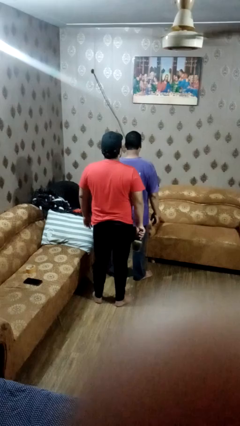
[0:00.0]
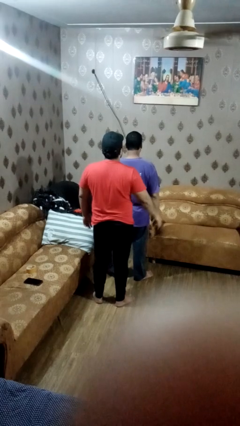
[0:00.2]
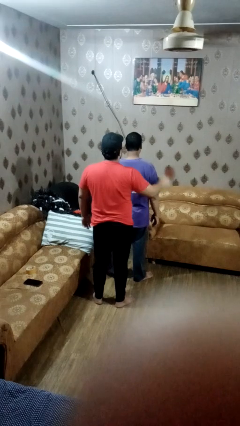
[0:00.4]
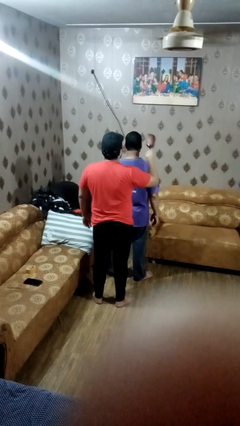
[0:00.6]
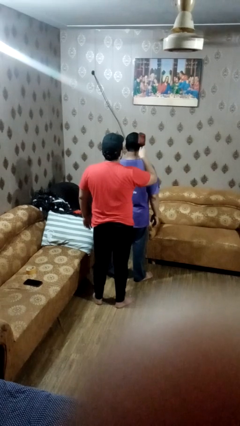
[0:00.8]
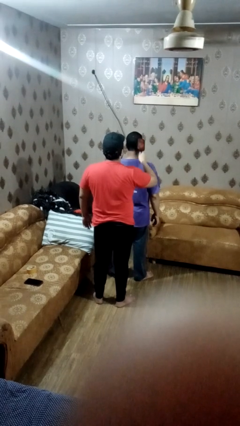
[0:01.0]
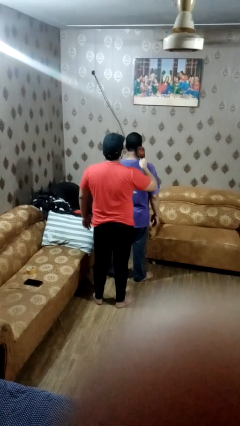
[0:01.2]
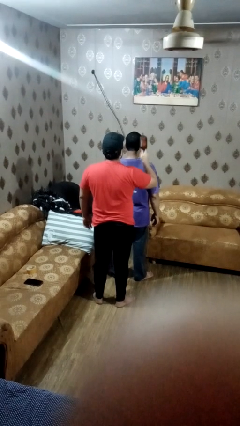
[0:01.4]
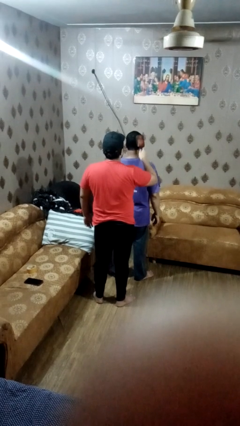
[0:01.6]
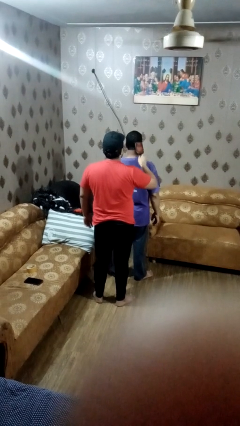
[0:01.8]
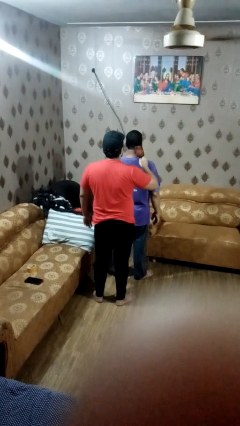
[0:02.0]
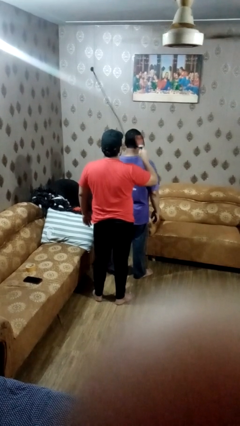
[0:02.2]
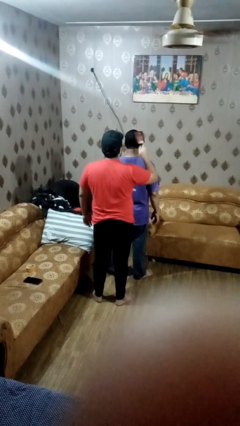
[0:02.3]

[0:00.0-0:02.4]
person brushes hair of person

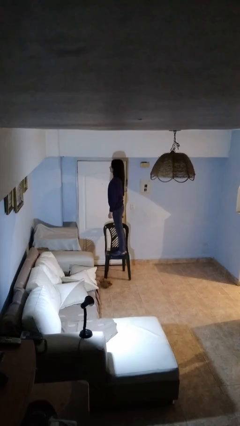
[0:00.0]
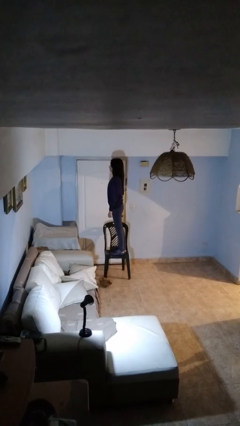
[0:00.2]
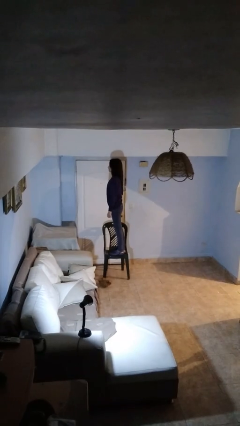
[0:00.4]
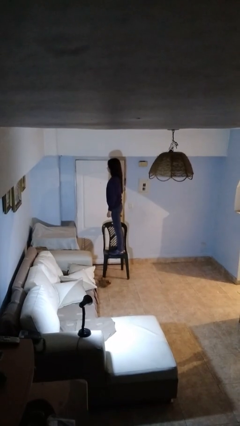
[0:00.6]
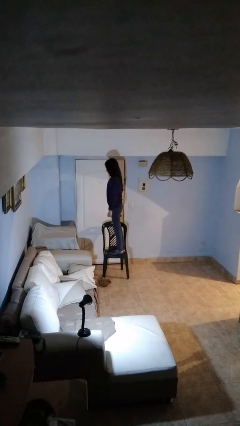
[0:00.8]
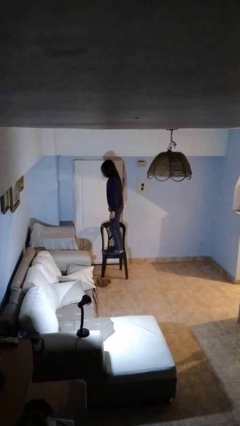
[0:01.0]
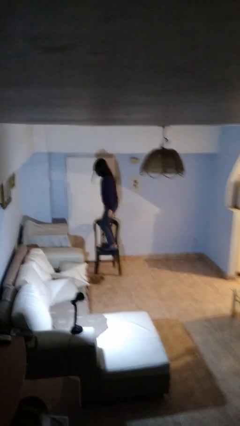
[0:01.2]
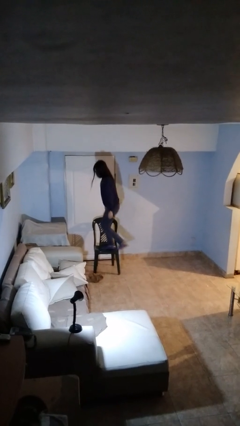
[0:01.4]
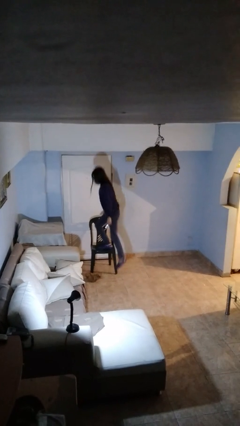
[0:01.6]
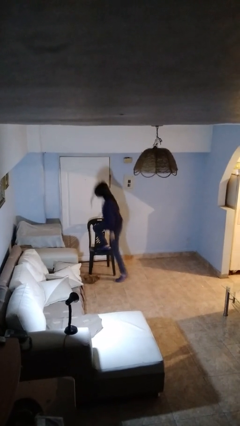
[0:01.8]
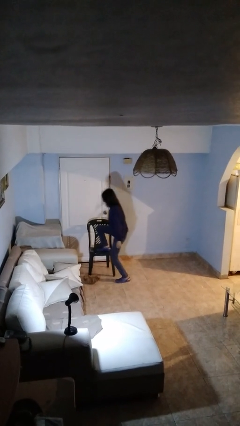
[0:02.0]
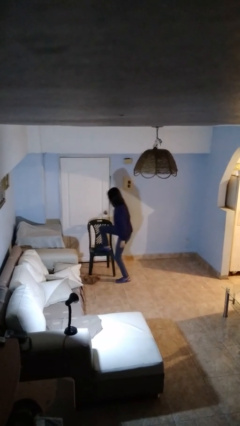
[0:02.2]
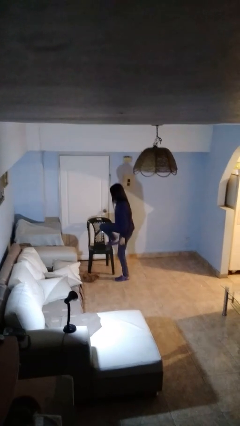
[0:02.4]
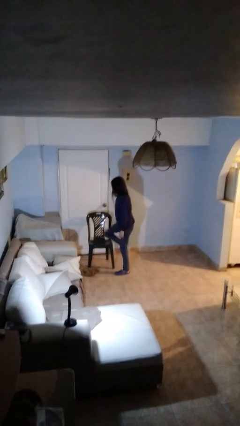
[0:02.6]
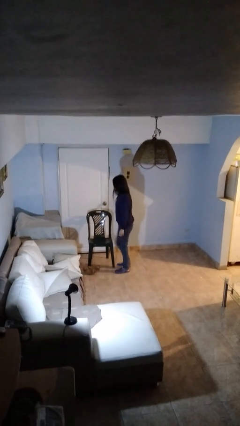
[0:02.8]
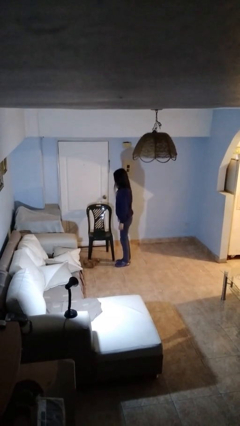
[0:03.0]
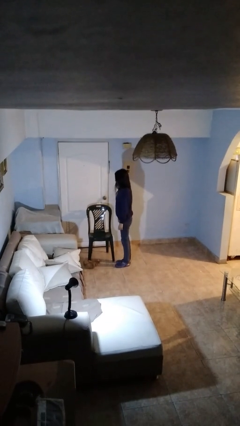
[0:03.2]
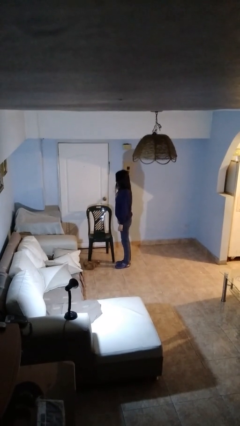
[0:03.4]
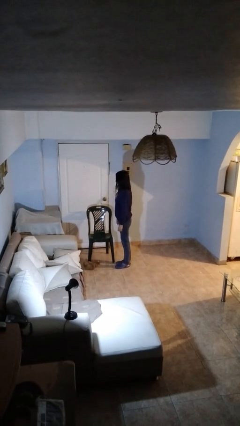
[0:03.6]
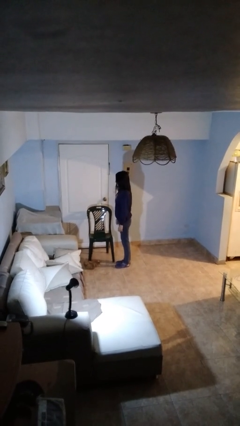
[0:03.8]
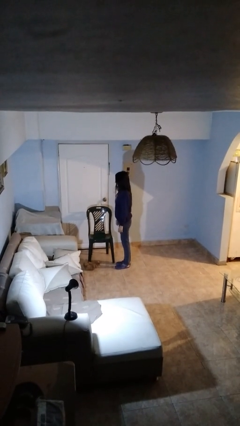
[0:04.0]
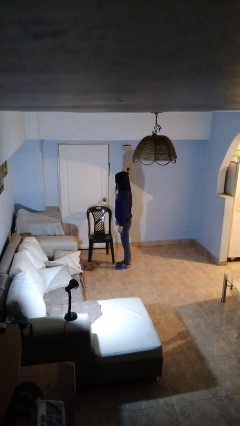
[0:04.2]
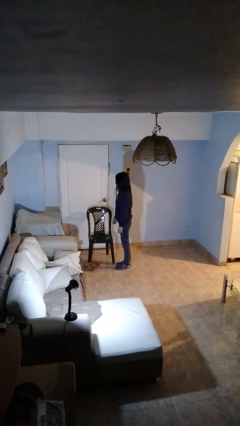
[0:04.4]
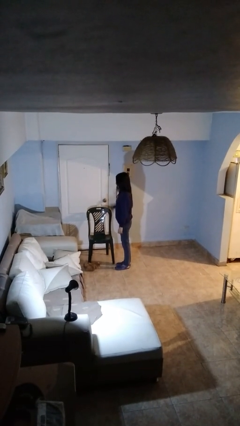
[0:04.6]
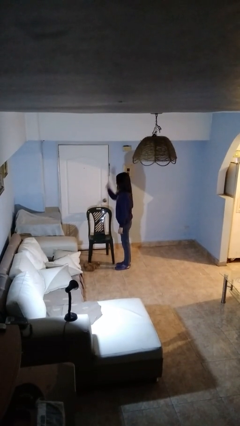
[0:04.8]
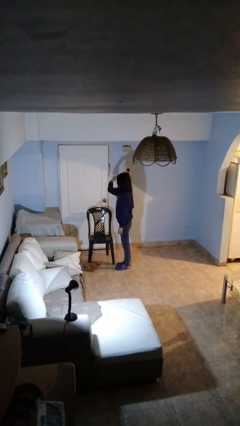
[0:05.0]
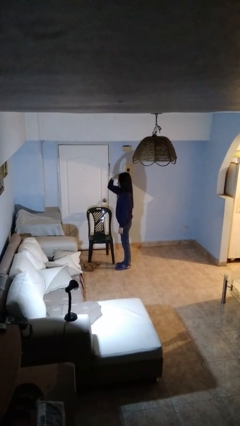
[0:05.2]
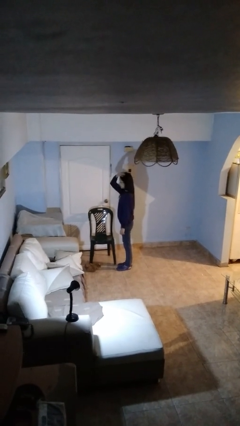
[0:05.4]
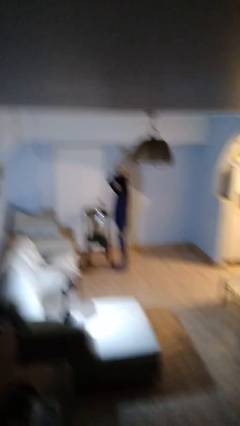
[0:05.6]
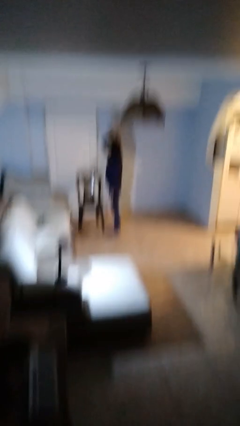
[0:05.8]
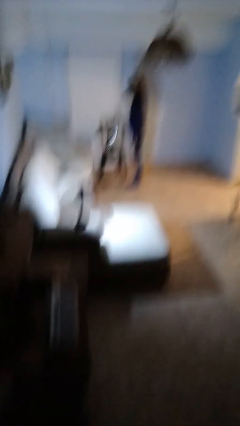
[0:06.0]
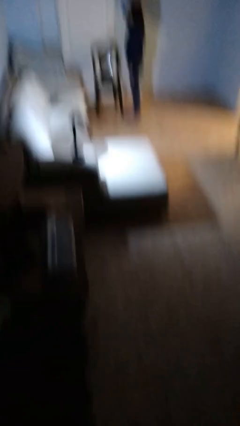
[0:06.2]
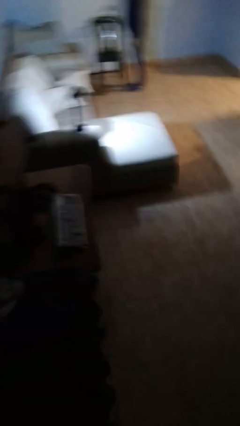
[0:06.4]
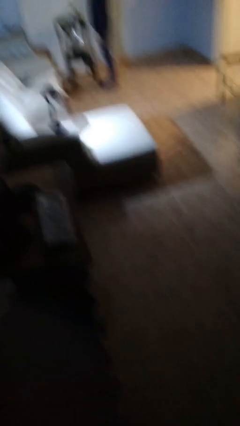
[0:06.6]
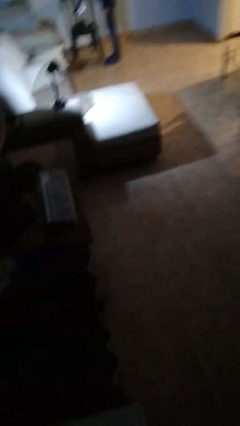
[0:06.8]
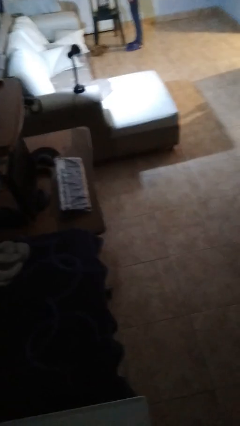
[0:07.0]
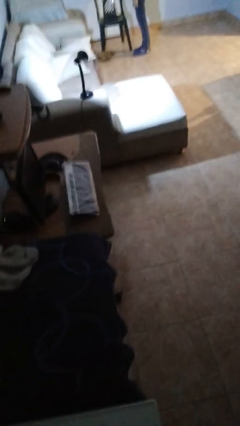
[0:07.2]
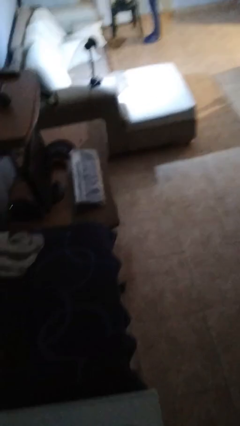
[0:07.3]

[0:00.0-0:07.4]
person climbs off chair

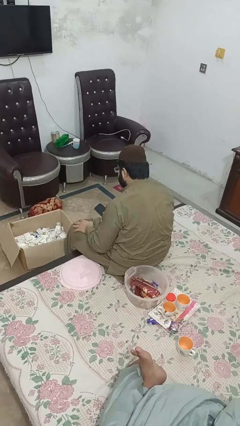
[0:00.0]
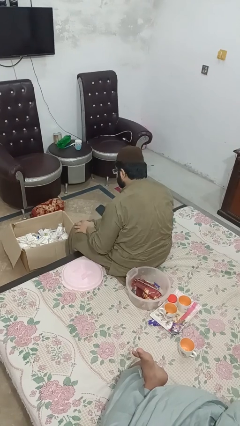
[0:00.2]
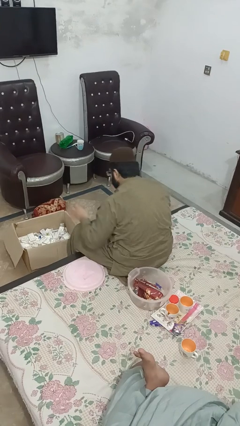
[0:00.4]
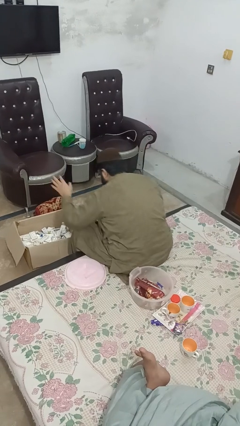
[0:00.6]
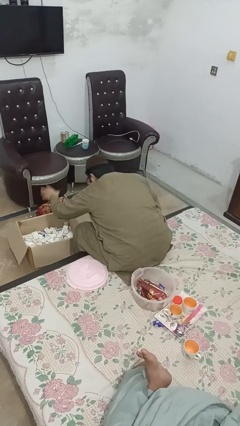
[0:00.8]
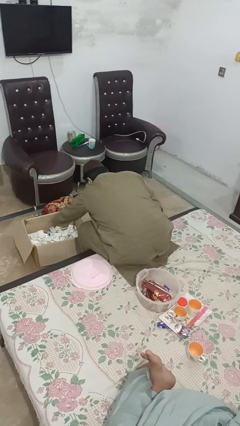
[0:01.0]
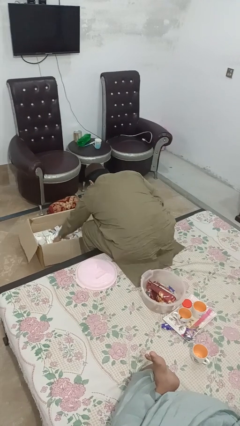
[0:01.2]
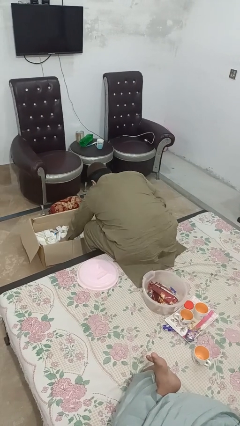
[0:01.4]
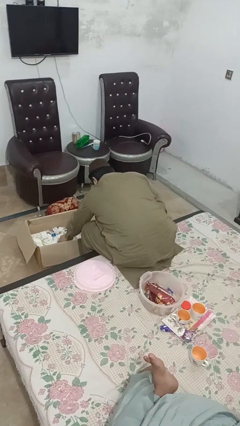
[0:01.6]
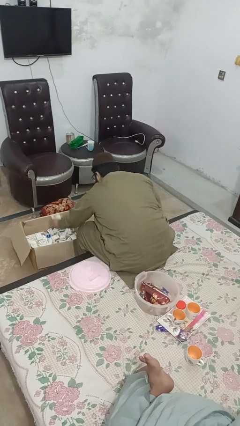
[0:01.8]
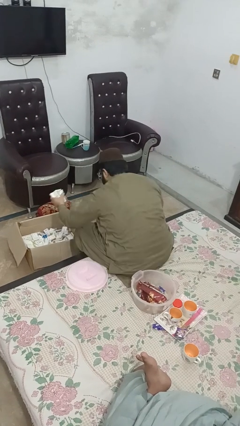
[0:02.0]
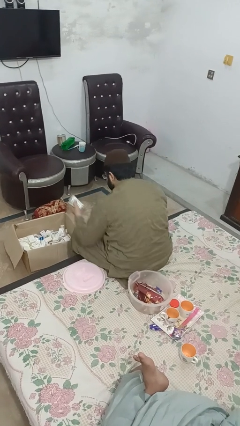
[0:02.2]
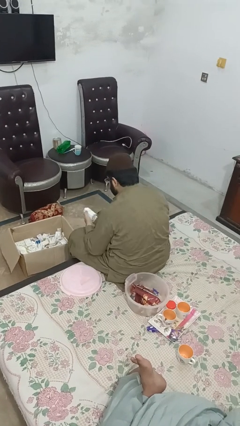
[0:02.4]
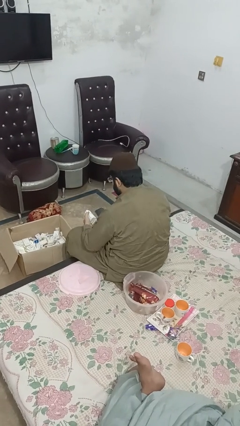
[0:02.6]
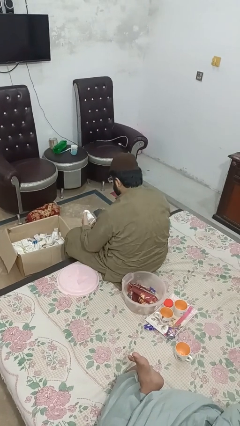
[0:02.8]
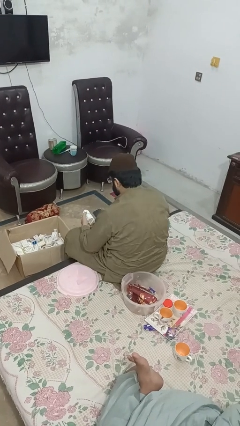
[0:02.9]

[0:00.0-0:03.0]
person takes object from box

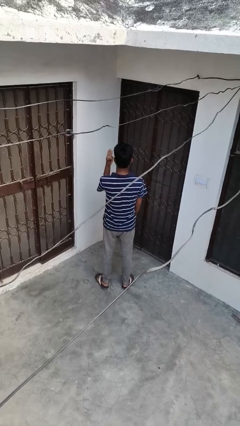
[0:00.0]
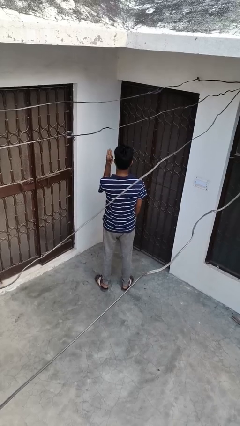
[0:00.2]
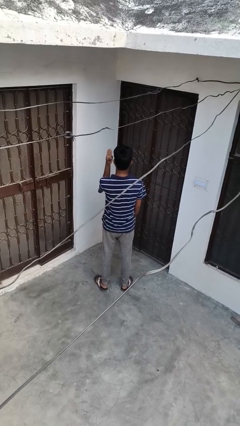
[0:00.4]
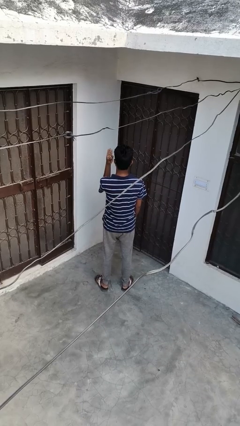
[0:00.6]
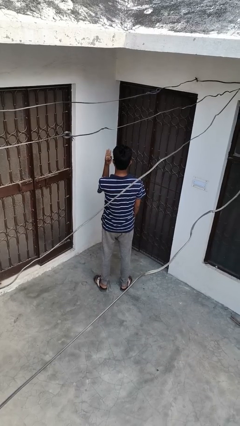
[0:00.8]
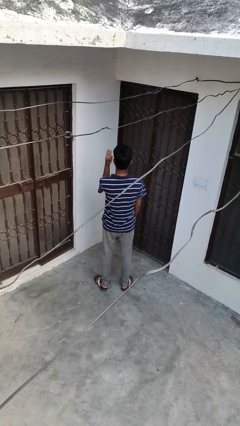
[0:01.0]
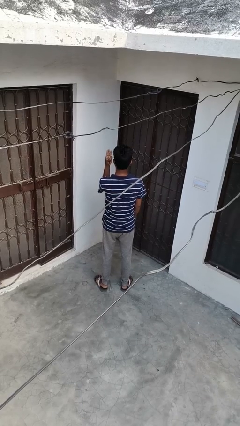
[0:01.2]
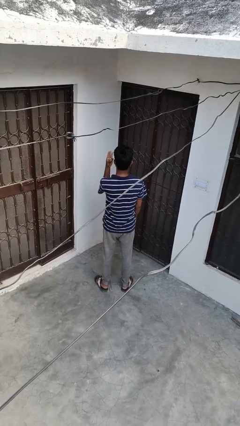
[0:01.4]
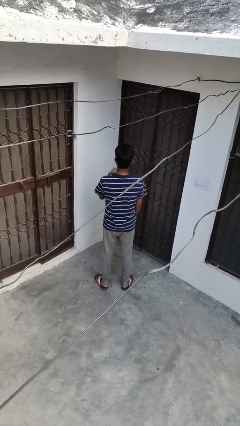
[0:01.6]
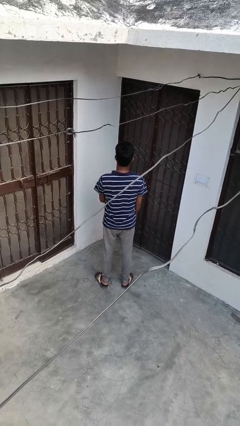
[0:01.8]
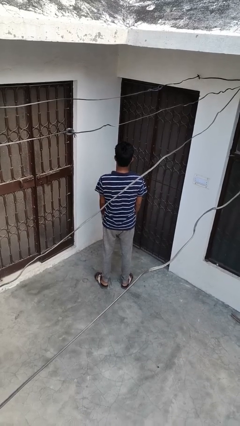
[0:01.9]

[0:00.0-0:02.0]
person gestures number four

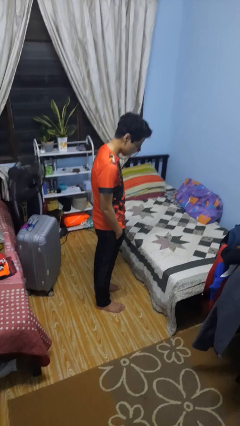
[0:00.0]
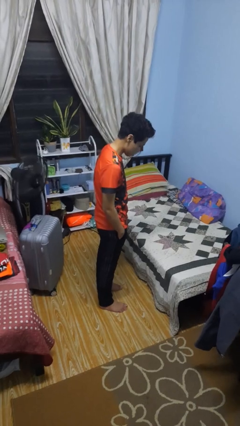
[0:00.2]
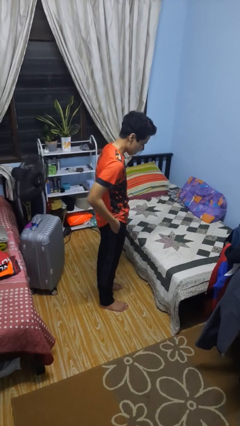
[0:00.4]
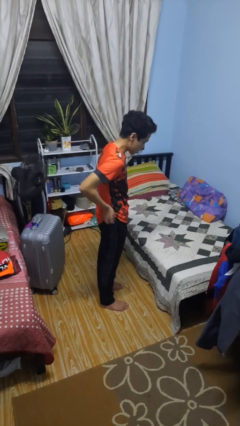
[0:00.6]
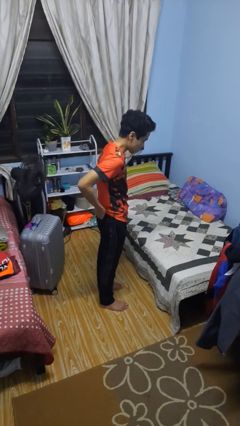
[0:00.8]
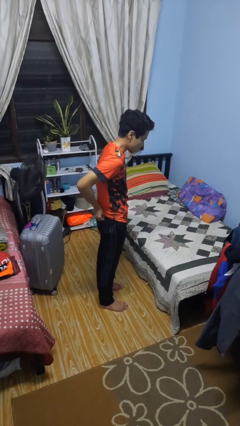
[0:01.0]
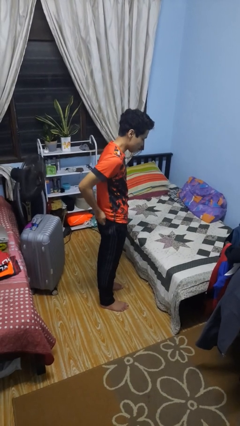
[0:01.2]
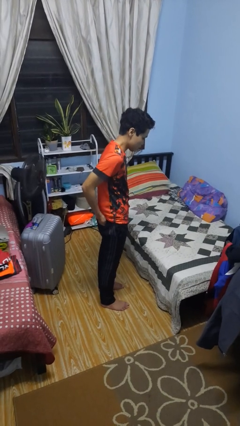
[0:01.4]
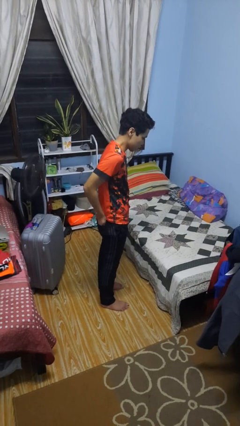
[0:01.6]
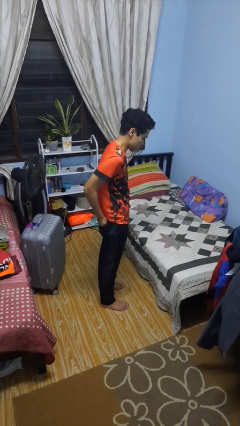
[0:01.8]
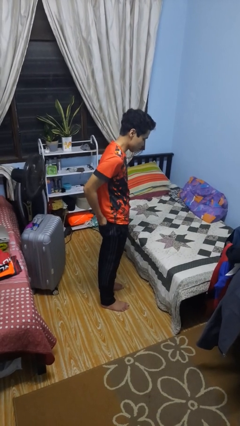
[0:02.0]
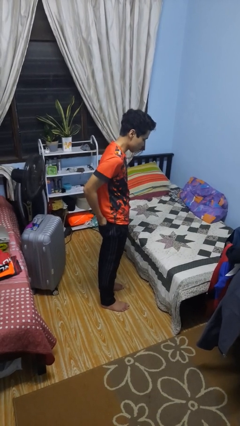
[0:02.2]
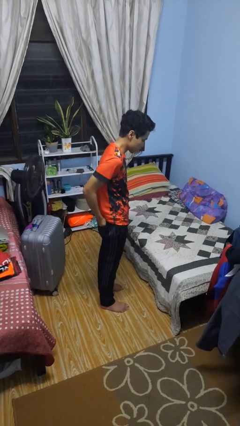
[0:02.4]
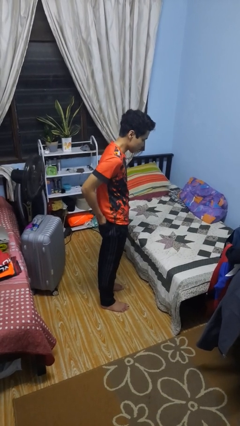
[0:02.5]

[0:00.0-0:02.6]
person puts hands in back pockets
